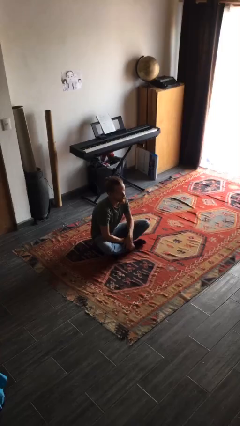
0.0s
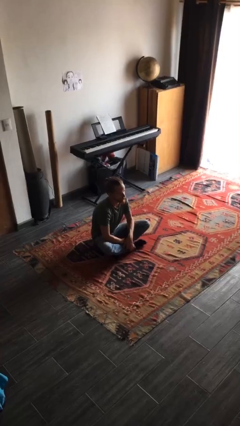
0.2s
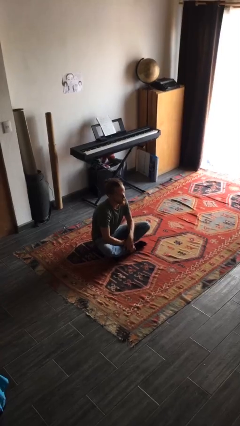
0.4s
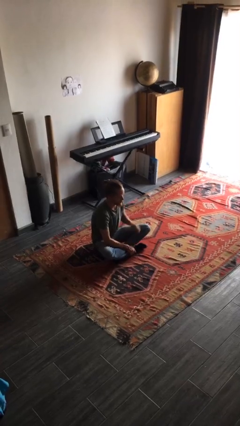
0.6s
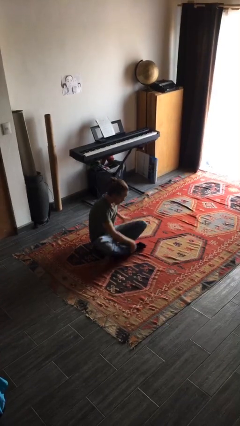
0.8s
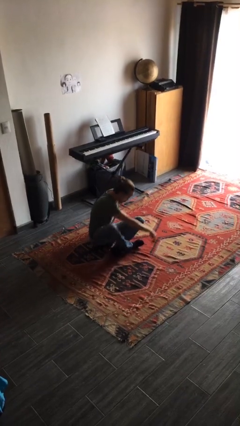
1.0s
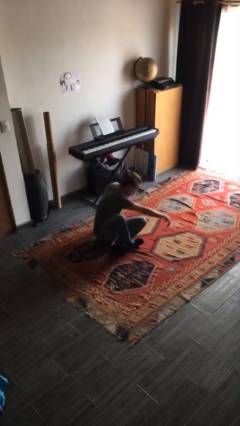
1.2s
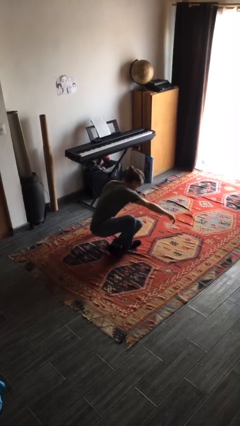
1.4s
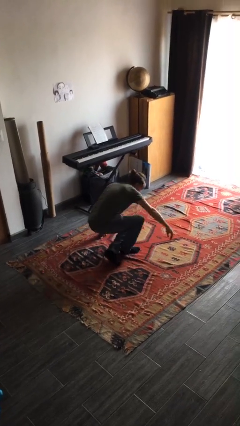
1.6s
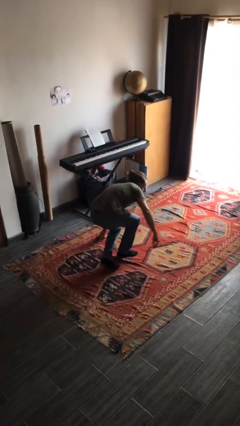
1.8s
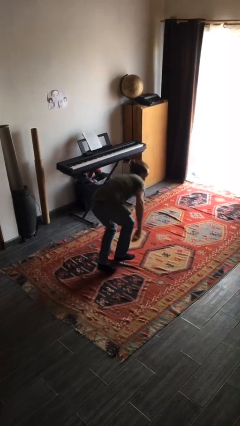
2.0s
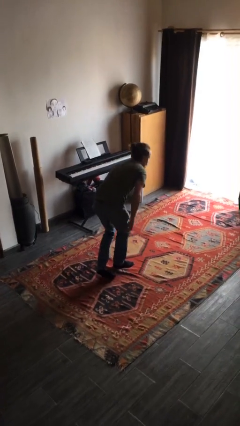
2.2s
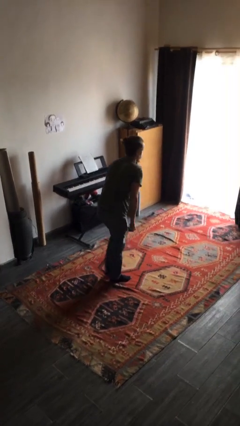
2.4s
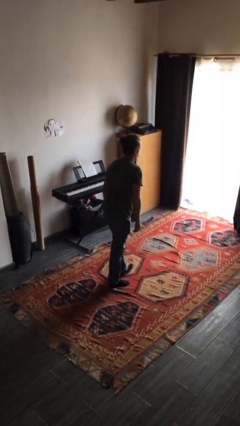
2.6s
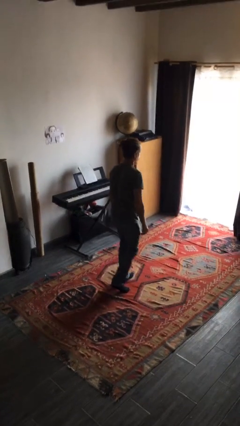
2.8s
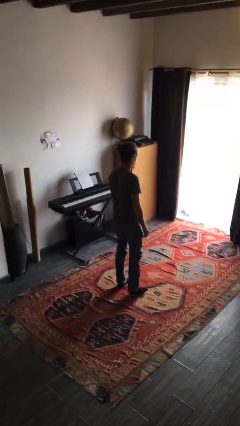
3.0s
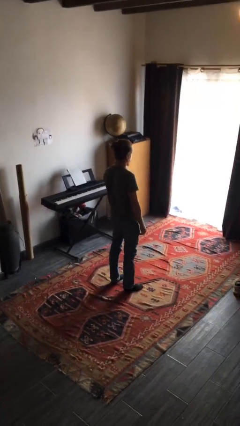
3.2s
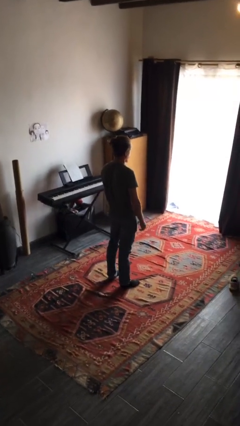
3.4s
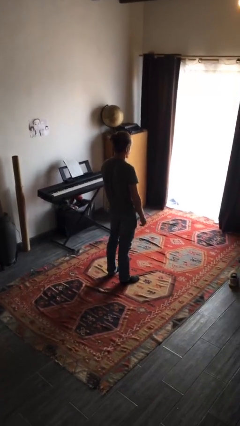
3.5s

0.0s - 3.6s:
person stands up from floor

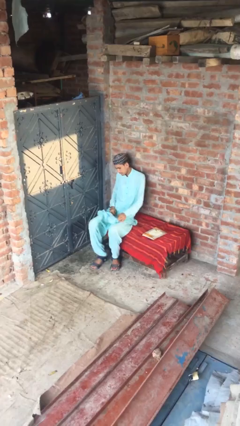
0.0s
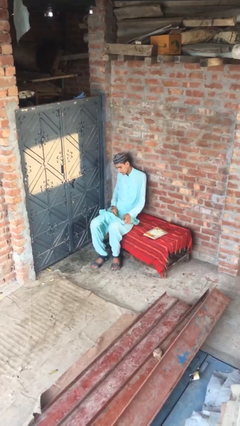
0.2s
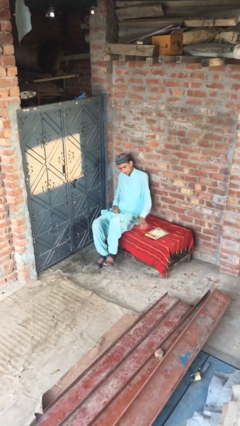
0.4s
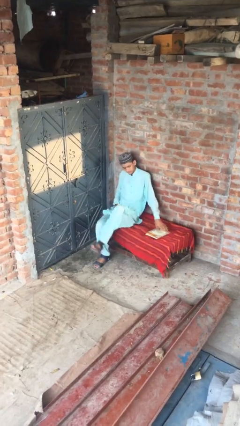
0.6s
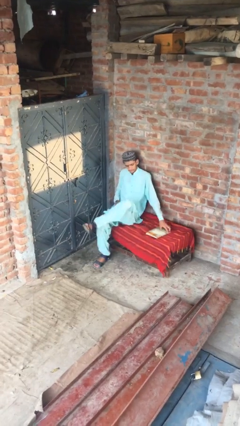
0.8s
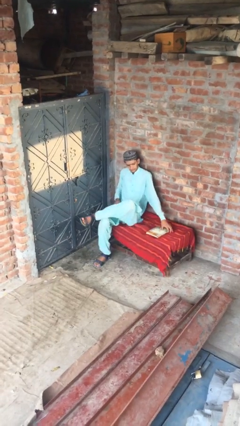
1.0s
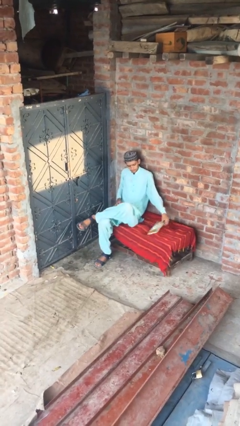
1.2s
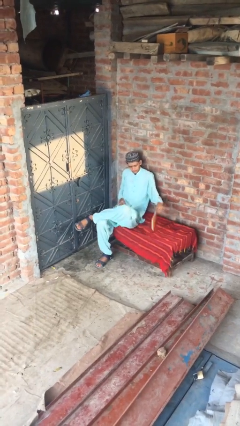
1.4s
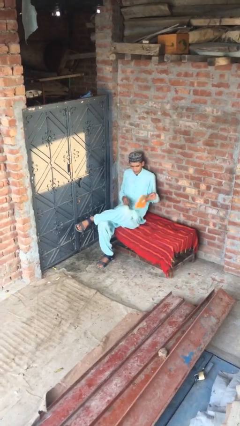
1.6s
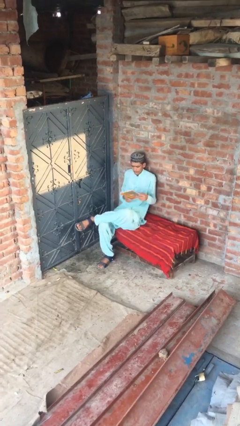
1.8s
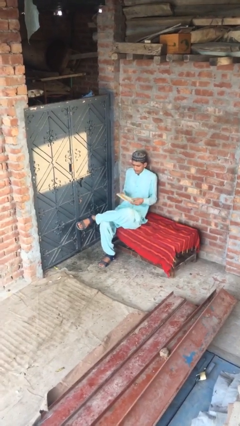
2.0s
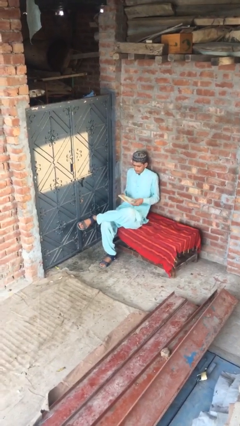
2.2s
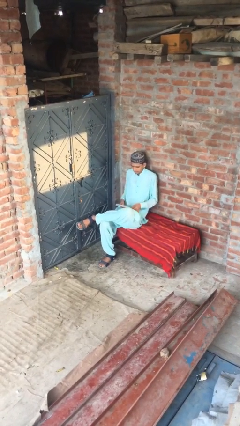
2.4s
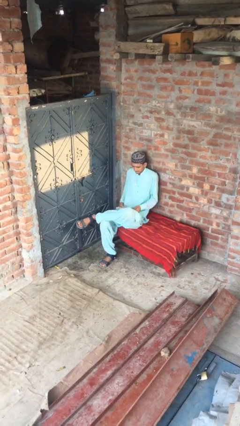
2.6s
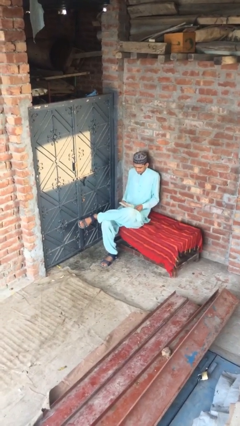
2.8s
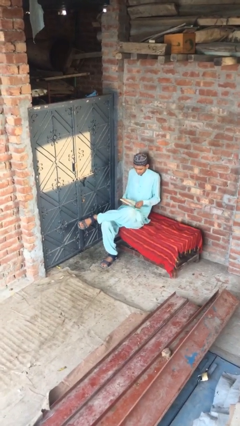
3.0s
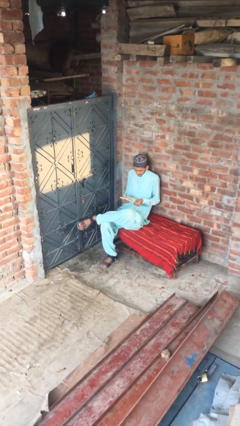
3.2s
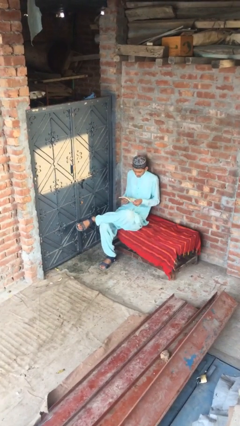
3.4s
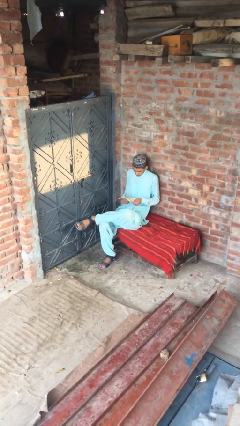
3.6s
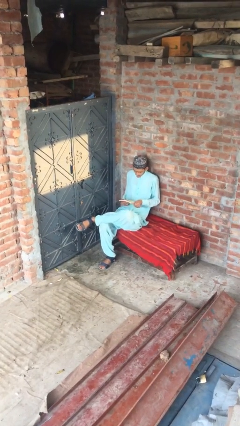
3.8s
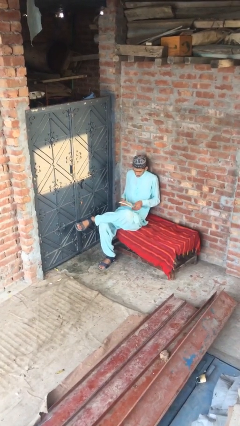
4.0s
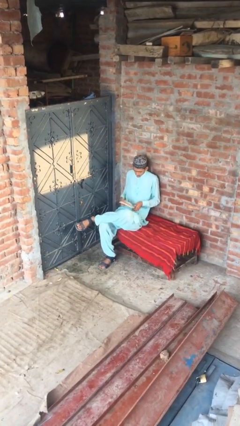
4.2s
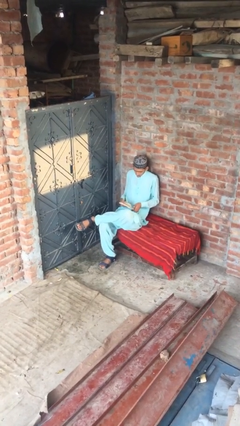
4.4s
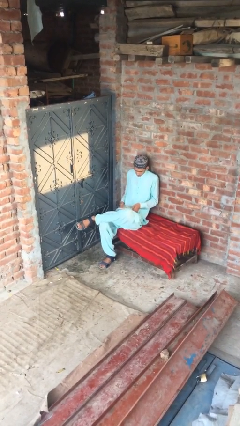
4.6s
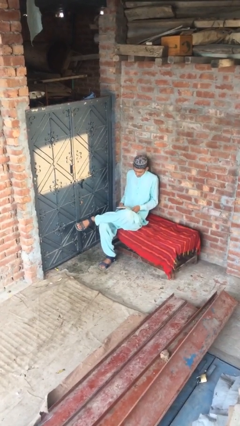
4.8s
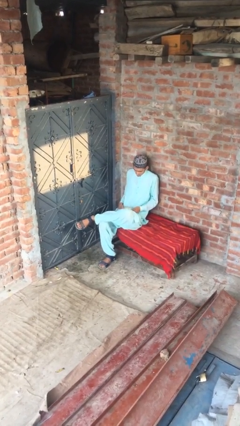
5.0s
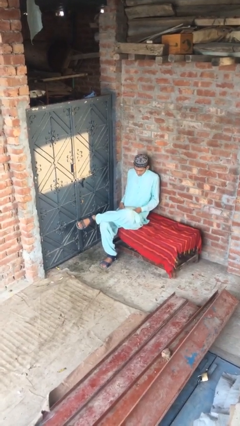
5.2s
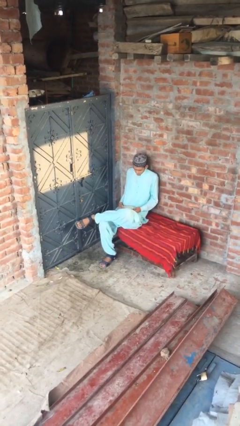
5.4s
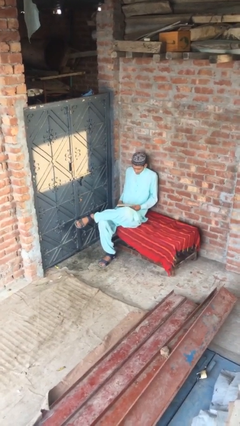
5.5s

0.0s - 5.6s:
person picks up object from table

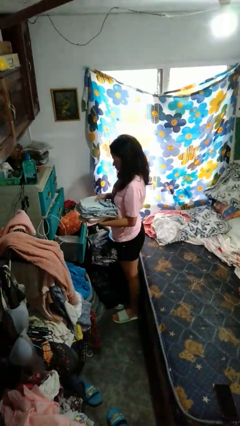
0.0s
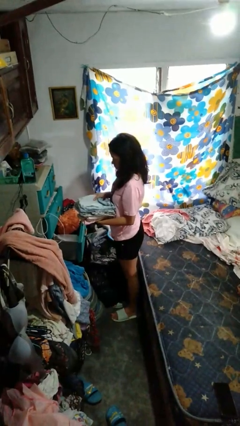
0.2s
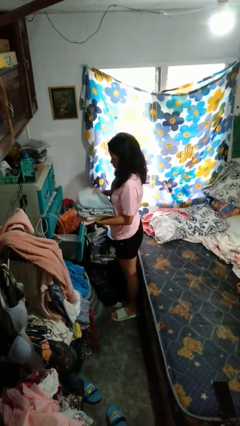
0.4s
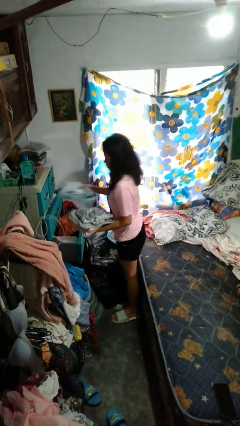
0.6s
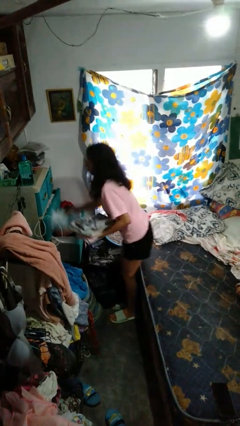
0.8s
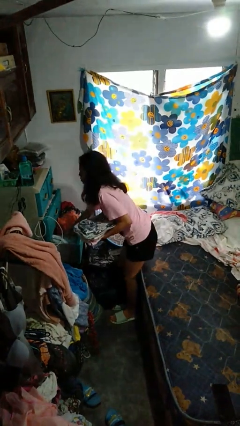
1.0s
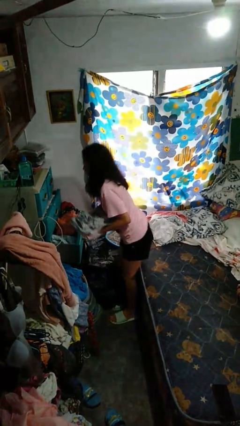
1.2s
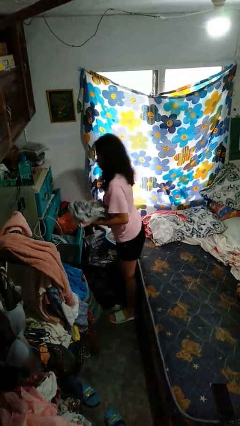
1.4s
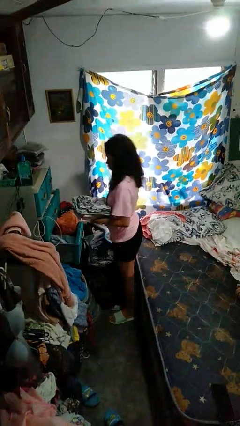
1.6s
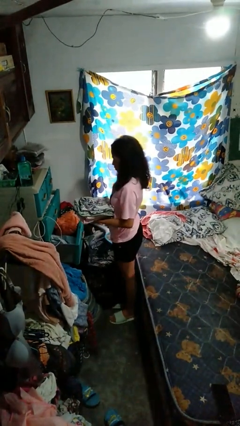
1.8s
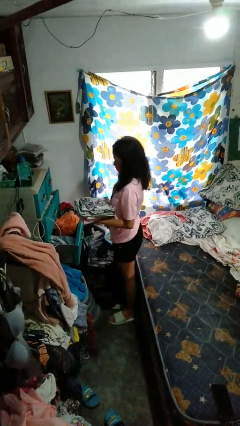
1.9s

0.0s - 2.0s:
person puts clothes into dresser

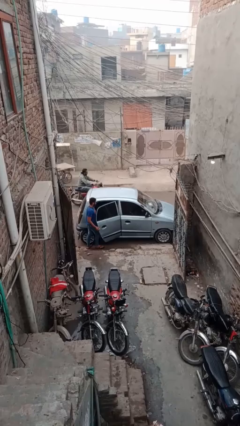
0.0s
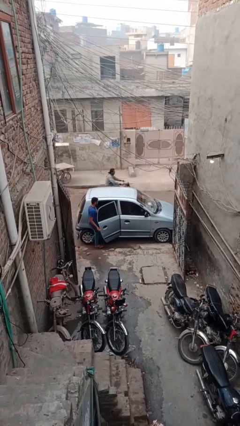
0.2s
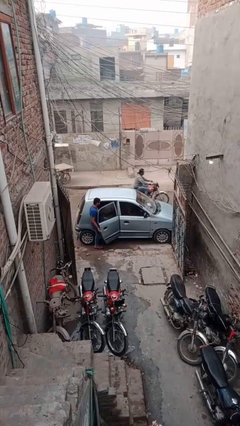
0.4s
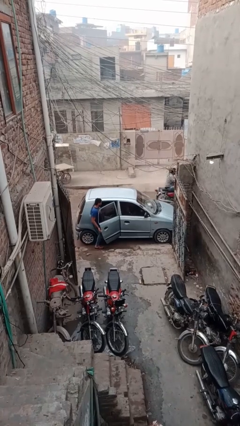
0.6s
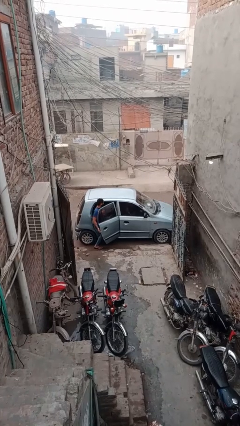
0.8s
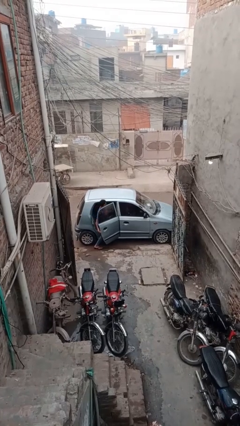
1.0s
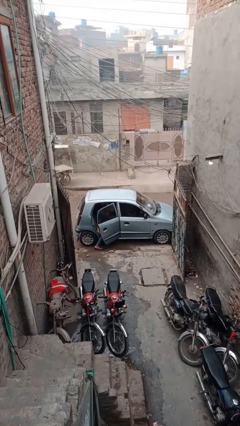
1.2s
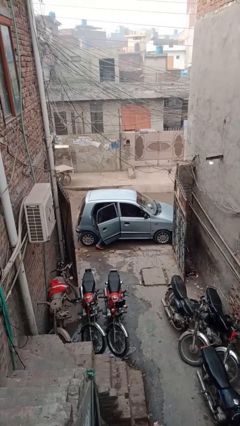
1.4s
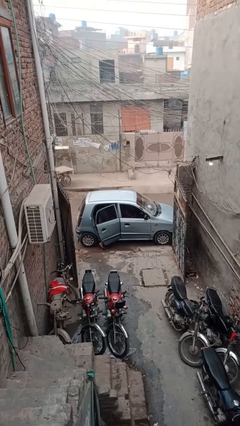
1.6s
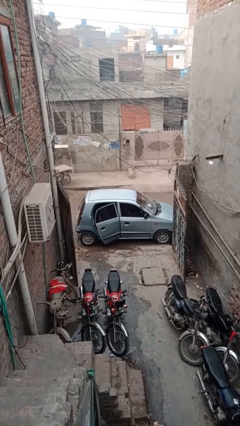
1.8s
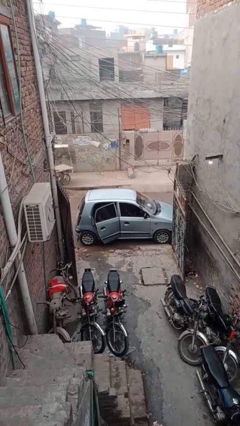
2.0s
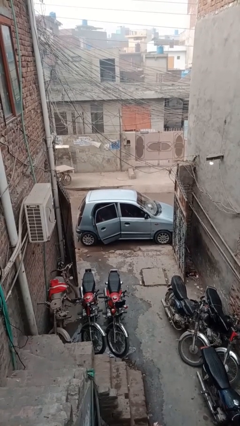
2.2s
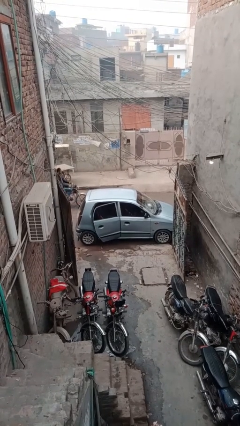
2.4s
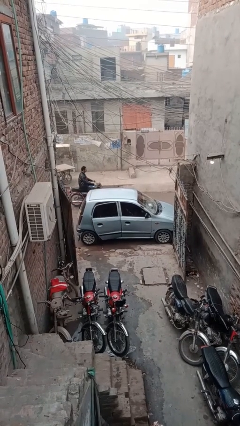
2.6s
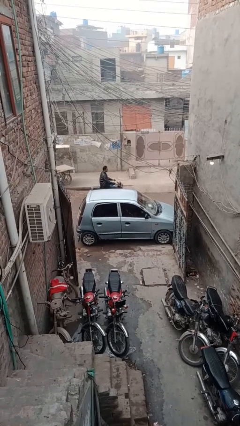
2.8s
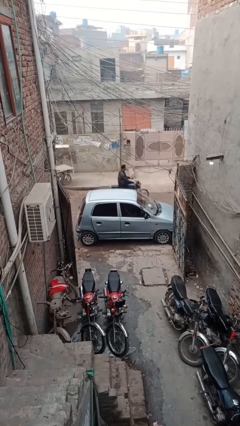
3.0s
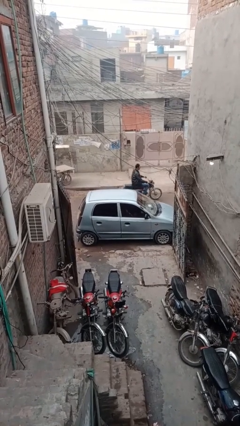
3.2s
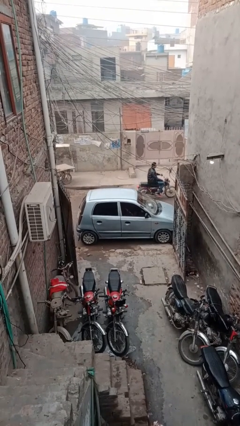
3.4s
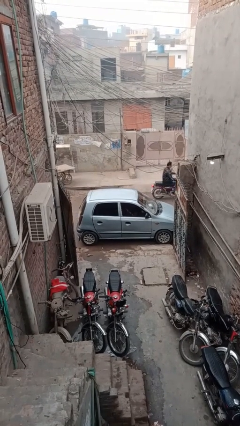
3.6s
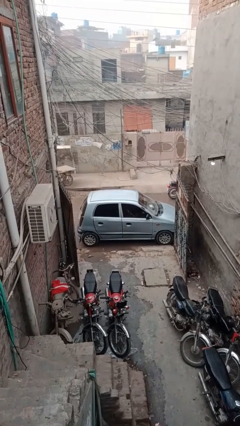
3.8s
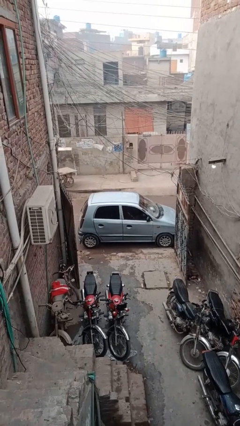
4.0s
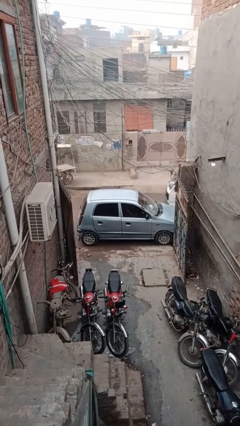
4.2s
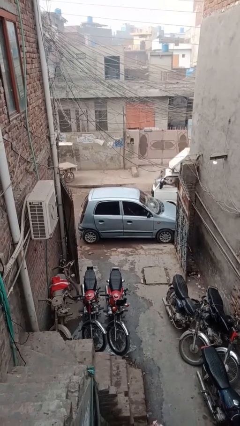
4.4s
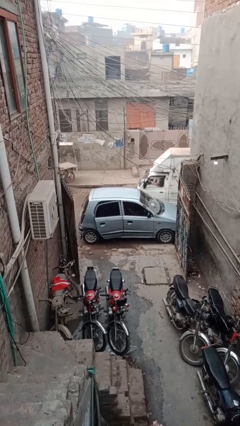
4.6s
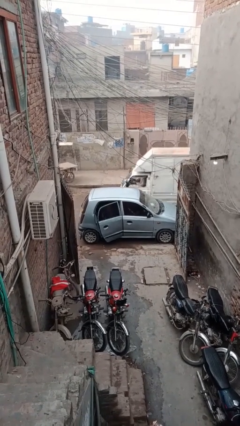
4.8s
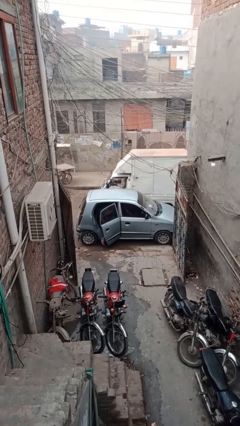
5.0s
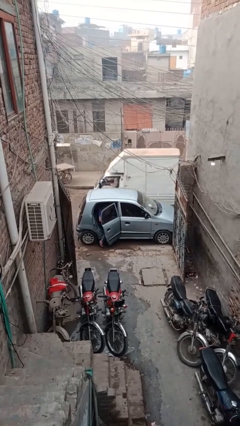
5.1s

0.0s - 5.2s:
car picks up person

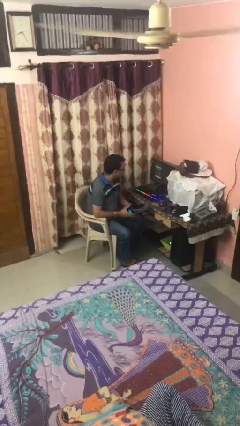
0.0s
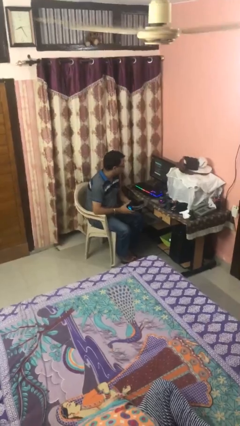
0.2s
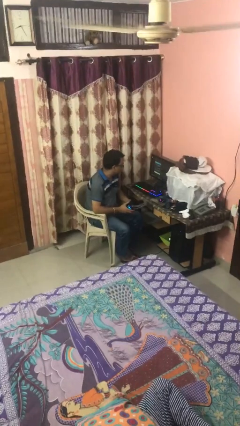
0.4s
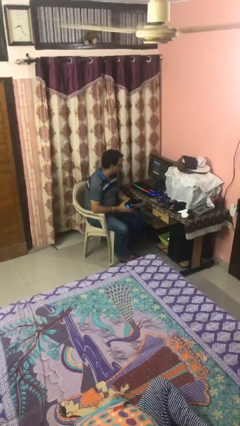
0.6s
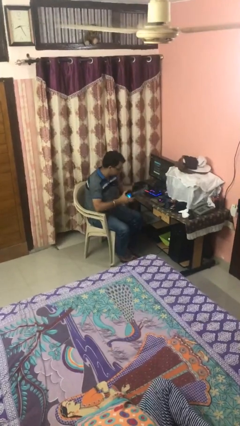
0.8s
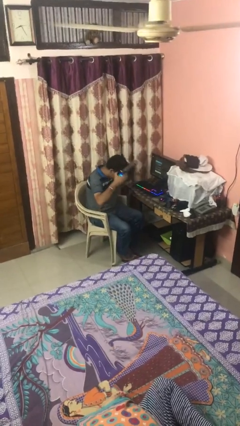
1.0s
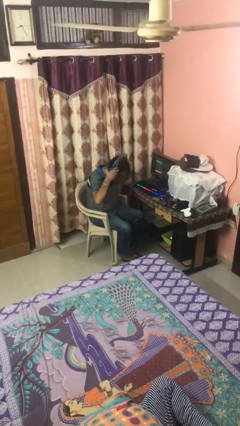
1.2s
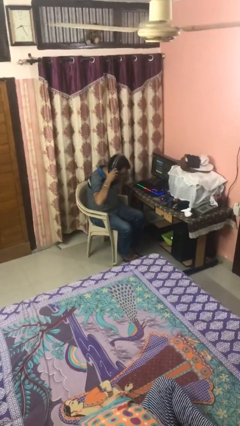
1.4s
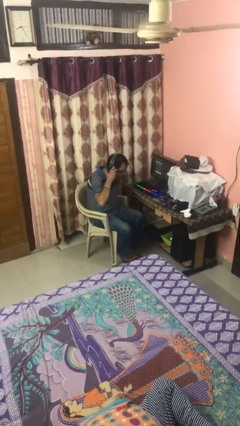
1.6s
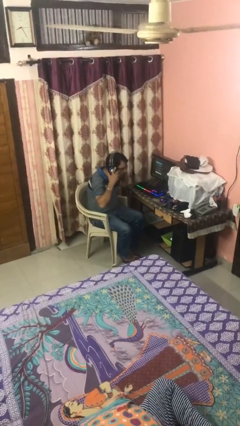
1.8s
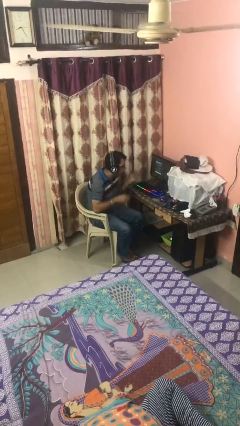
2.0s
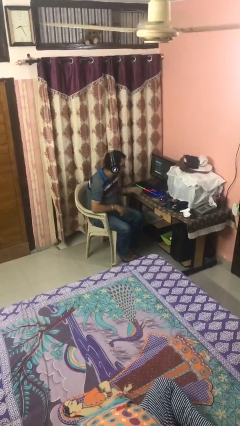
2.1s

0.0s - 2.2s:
person puts on headphones
